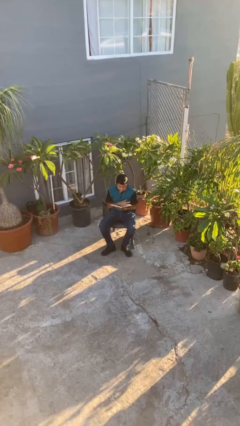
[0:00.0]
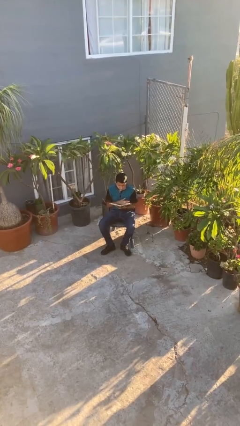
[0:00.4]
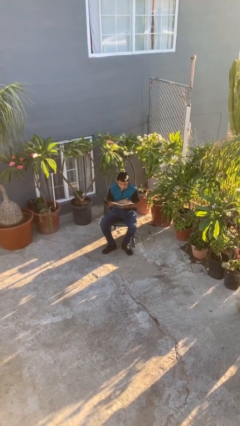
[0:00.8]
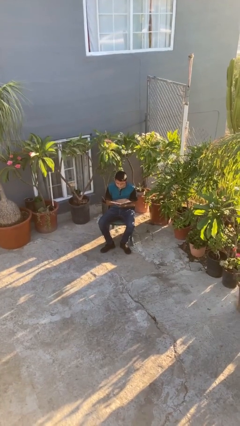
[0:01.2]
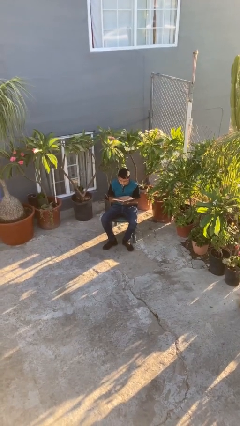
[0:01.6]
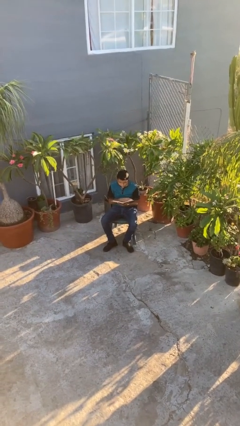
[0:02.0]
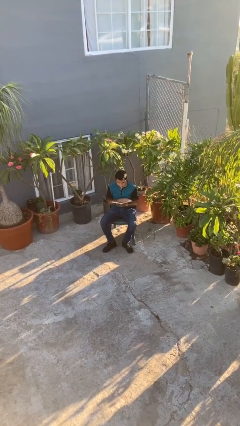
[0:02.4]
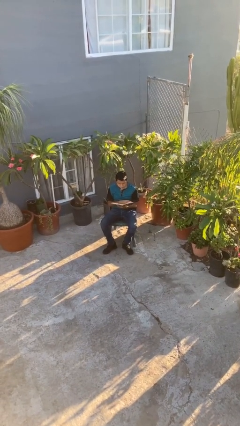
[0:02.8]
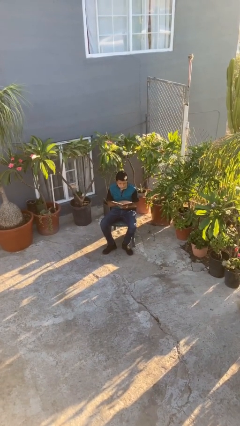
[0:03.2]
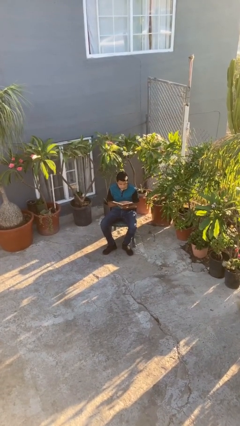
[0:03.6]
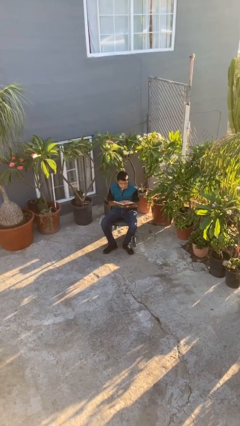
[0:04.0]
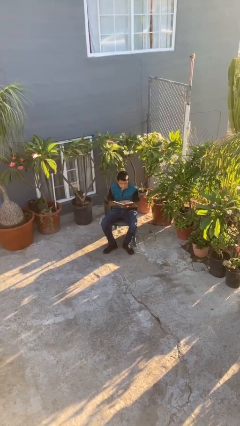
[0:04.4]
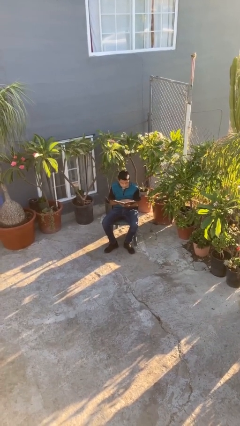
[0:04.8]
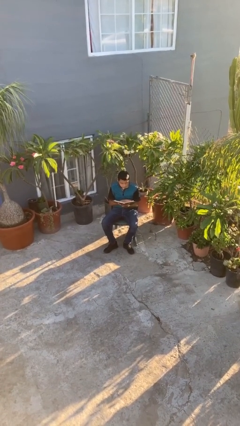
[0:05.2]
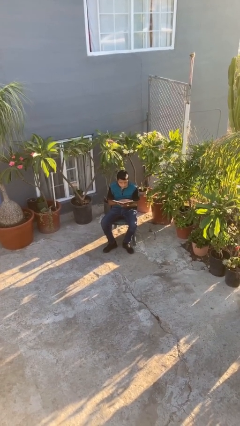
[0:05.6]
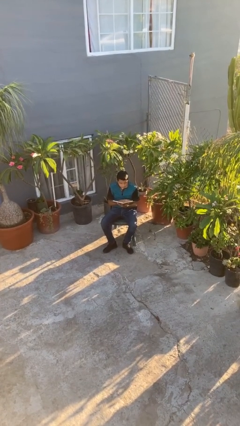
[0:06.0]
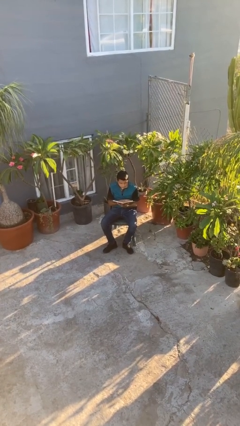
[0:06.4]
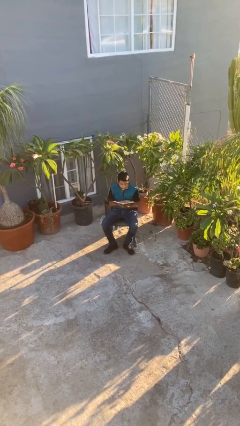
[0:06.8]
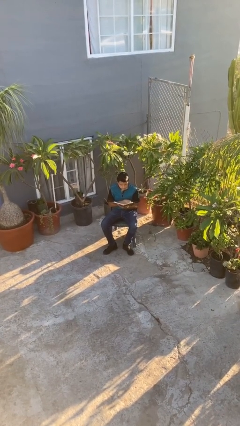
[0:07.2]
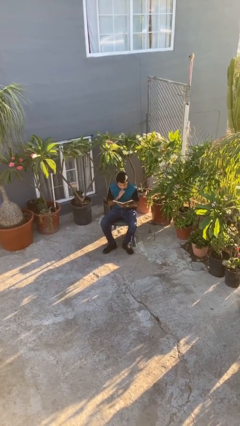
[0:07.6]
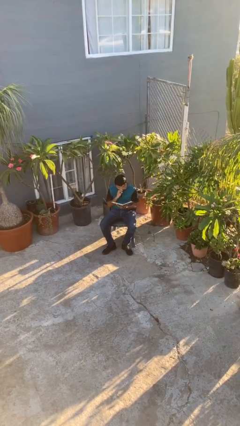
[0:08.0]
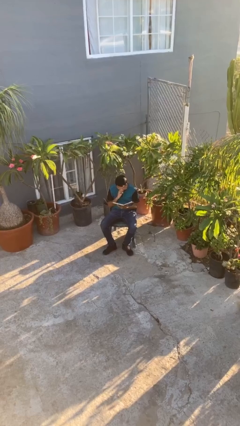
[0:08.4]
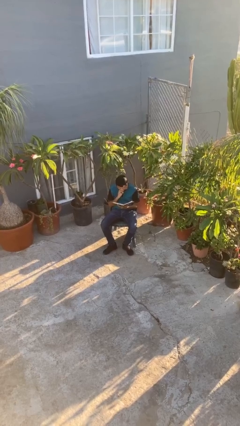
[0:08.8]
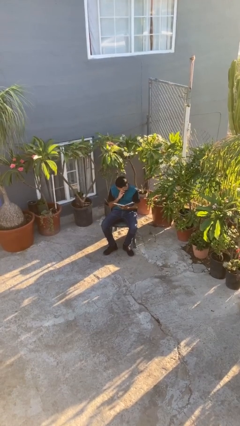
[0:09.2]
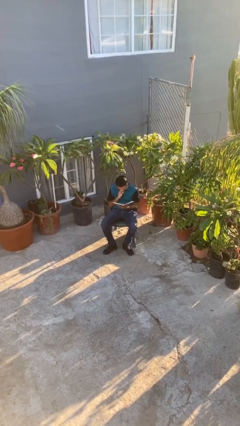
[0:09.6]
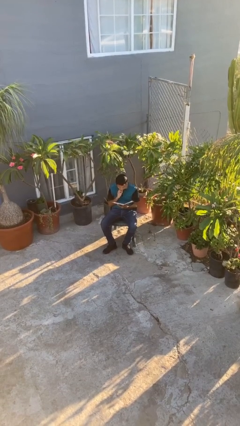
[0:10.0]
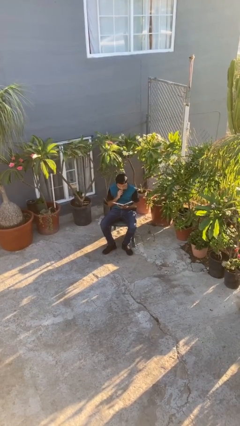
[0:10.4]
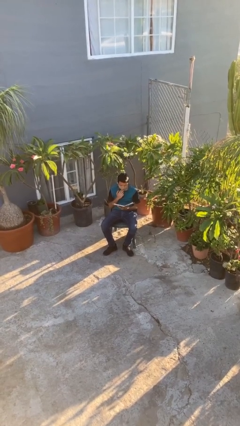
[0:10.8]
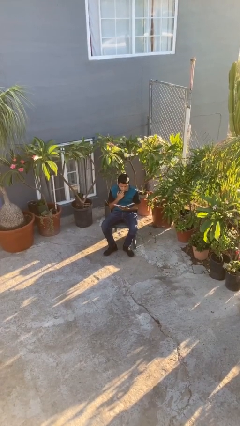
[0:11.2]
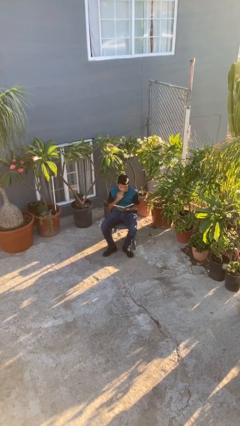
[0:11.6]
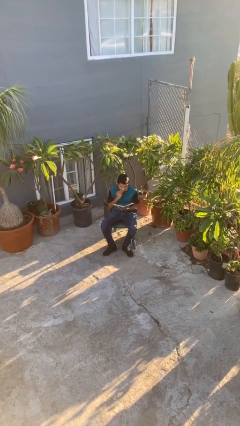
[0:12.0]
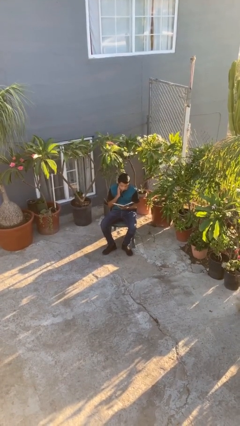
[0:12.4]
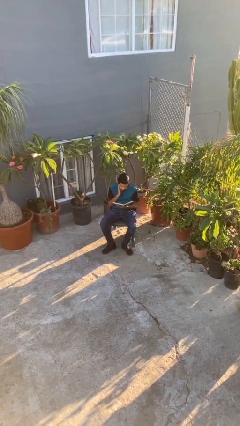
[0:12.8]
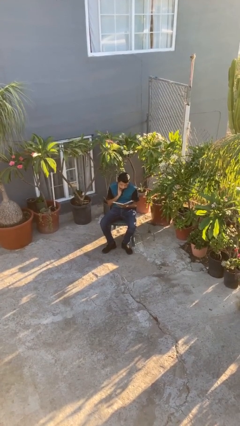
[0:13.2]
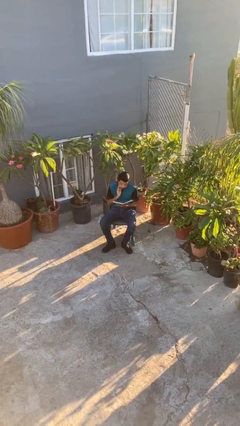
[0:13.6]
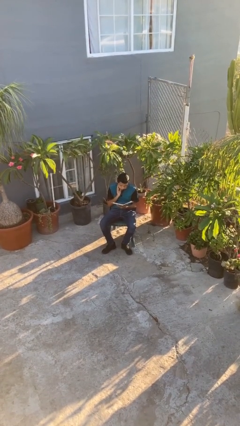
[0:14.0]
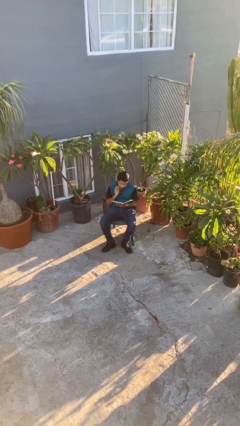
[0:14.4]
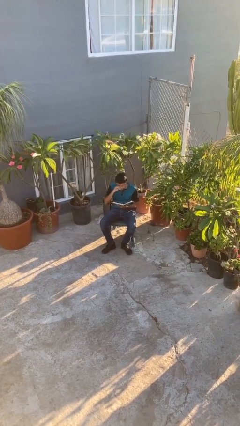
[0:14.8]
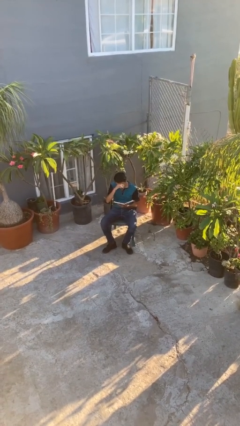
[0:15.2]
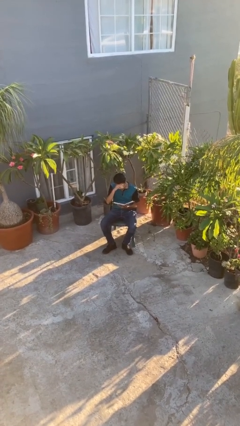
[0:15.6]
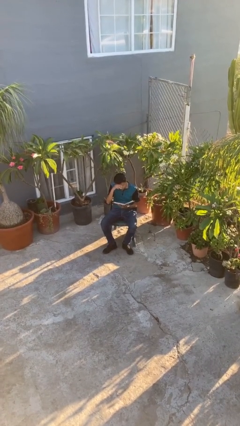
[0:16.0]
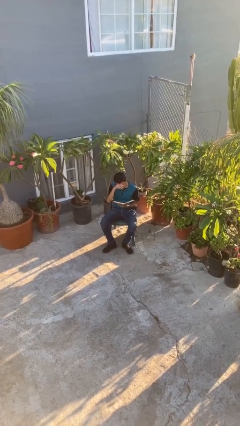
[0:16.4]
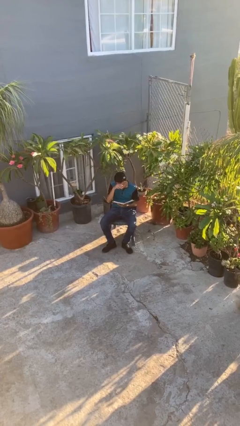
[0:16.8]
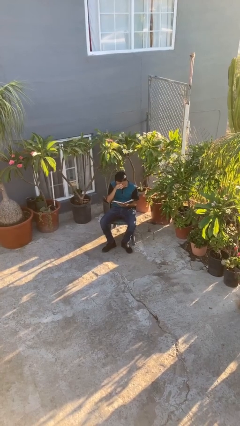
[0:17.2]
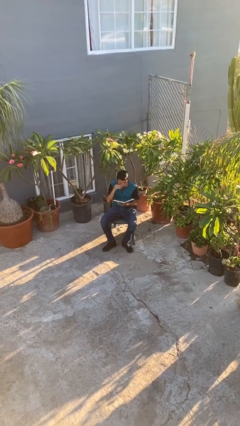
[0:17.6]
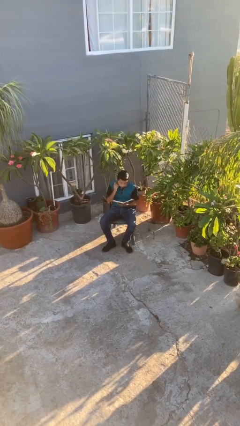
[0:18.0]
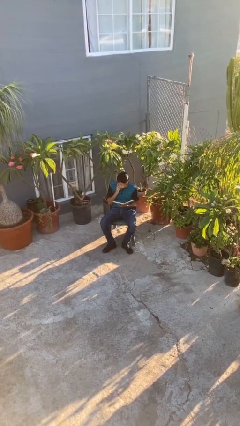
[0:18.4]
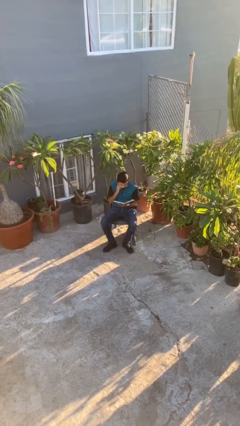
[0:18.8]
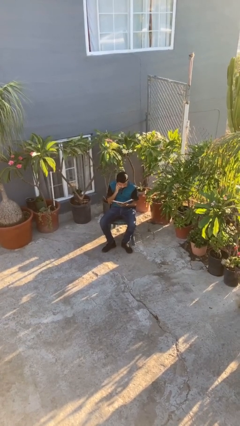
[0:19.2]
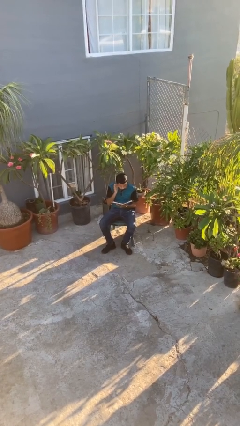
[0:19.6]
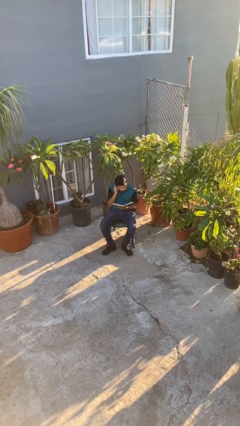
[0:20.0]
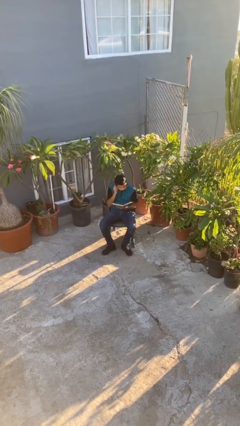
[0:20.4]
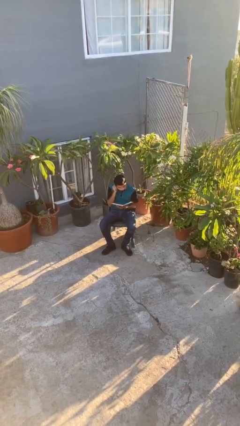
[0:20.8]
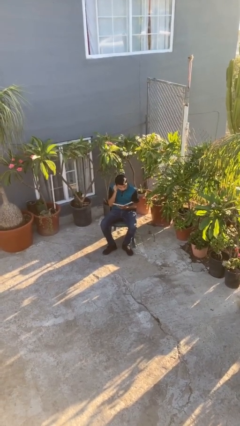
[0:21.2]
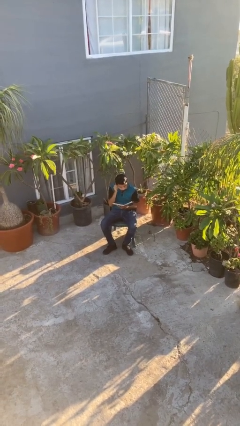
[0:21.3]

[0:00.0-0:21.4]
person reads document

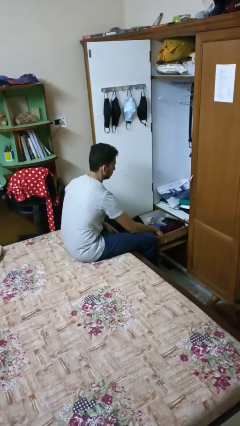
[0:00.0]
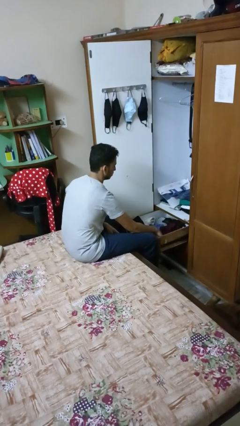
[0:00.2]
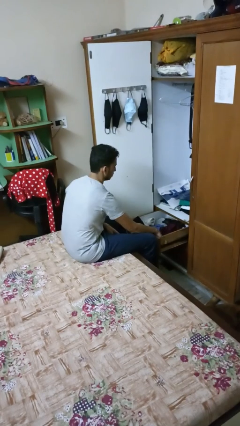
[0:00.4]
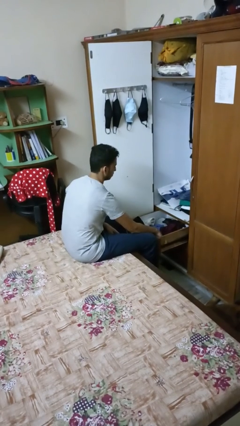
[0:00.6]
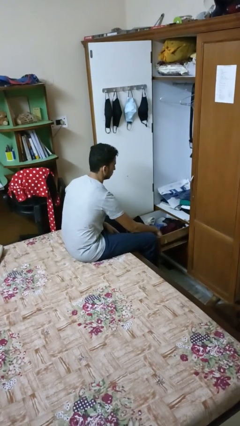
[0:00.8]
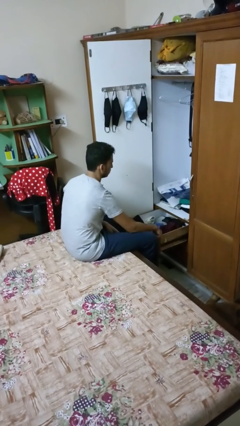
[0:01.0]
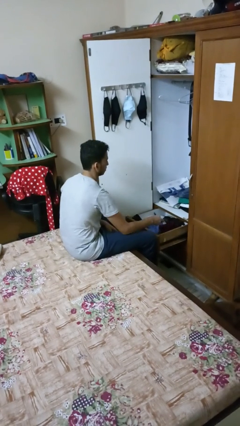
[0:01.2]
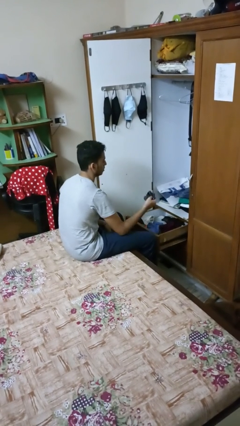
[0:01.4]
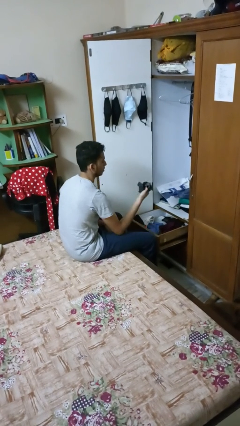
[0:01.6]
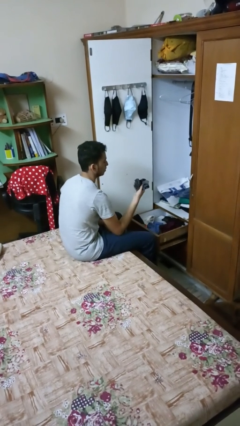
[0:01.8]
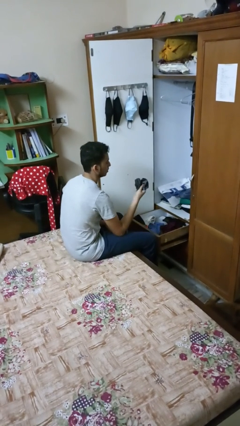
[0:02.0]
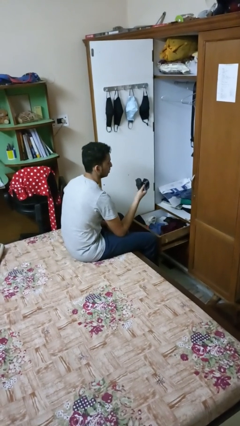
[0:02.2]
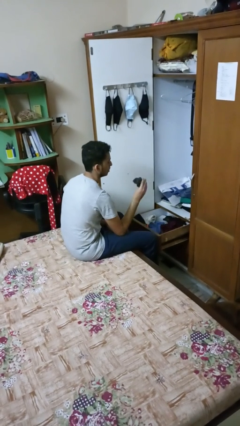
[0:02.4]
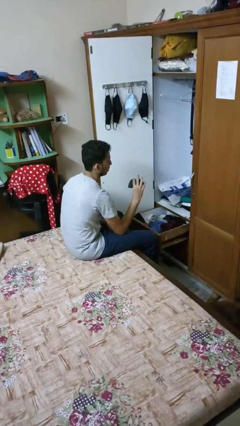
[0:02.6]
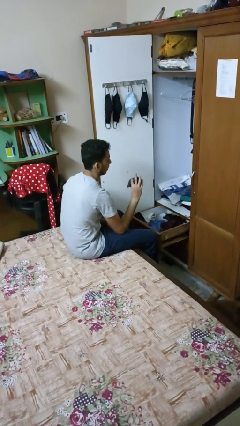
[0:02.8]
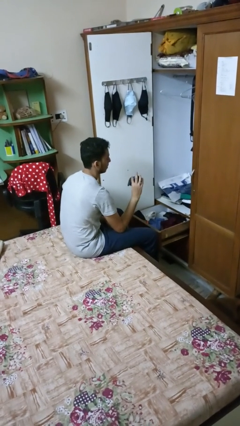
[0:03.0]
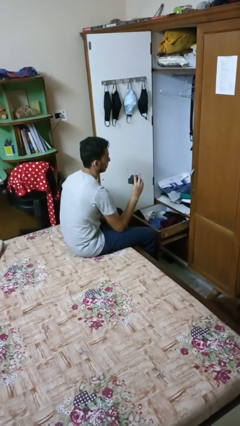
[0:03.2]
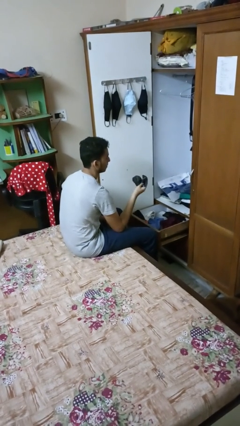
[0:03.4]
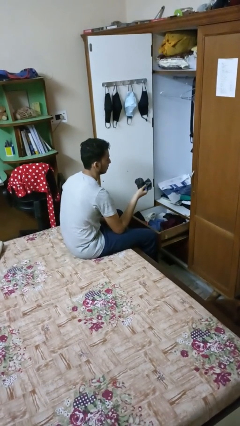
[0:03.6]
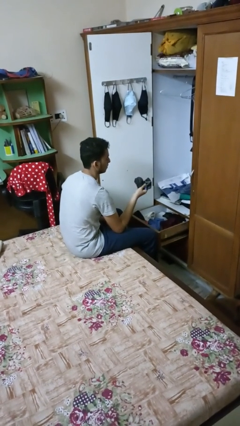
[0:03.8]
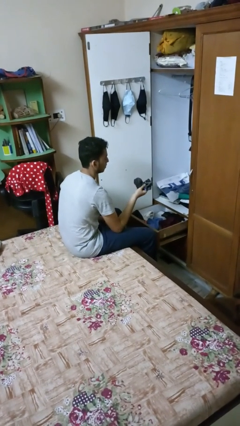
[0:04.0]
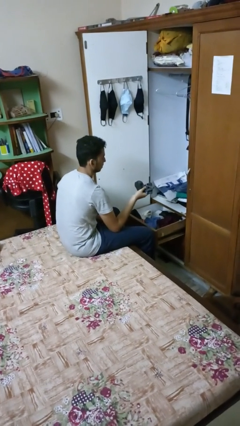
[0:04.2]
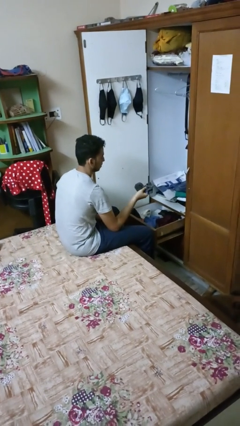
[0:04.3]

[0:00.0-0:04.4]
person takes clothes from dresser

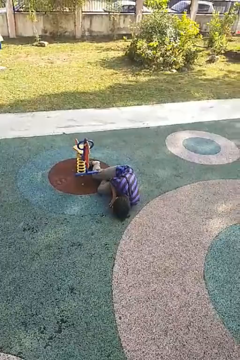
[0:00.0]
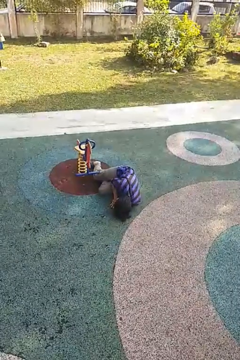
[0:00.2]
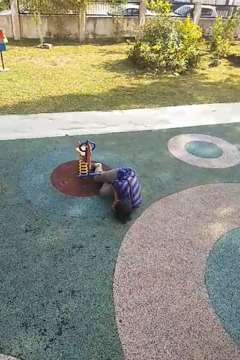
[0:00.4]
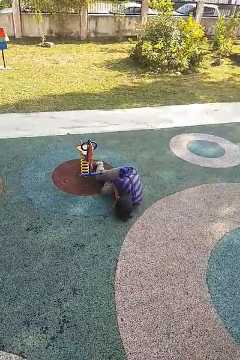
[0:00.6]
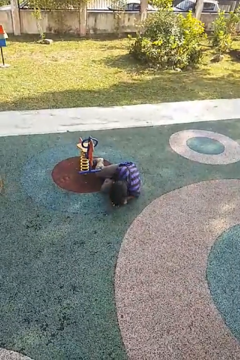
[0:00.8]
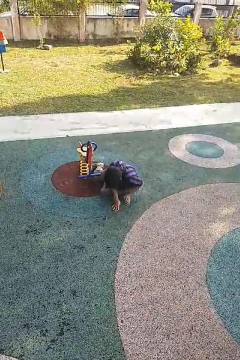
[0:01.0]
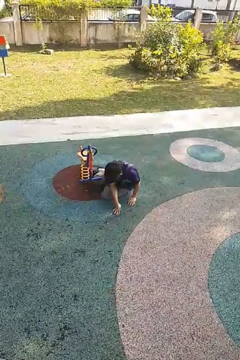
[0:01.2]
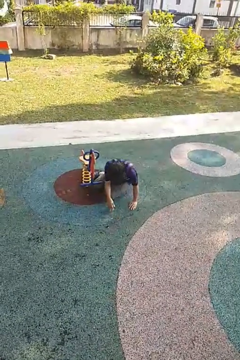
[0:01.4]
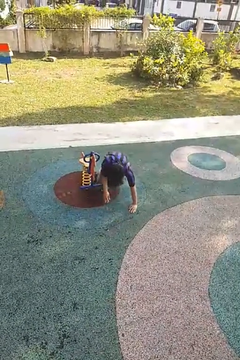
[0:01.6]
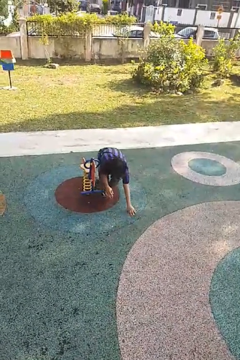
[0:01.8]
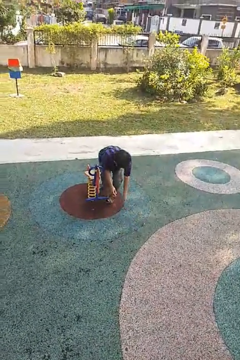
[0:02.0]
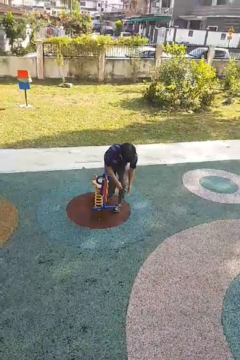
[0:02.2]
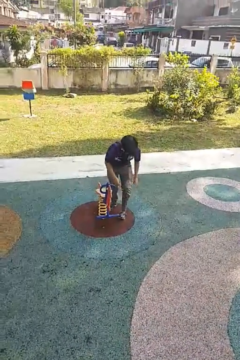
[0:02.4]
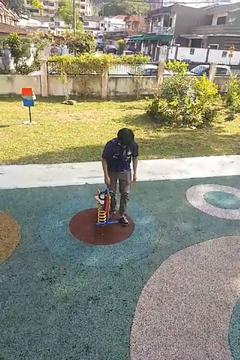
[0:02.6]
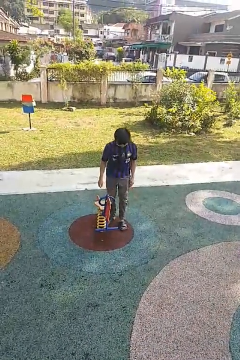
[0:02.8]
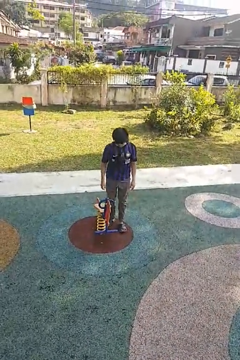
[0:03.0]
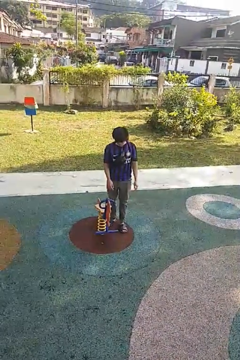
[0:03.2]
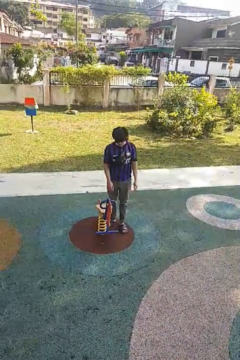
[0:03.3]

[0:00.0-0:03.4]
person stands up from floor

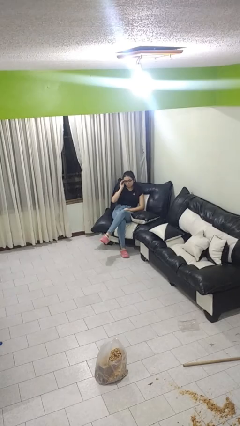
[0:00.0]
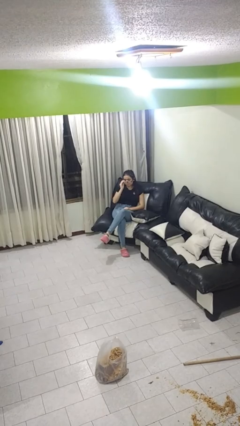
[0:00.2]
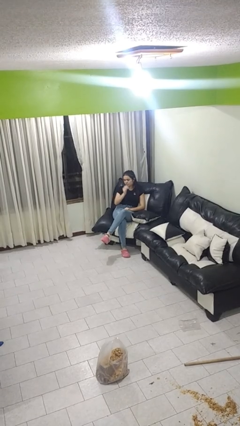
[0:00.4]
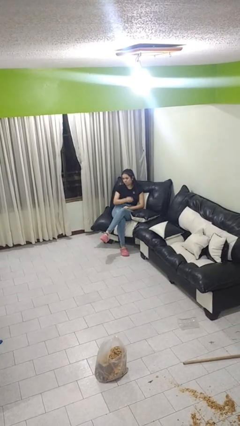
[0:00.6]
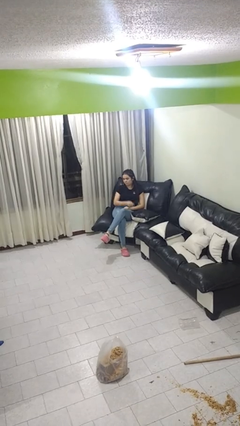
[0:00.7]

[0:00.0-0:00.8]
person takes off glasses
